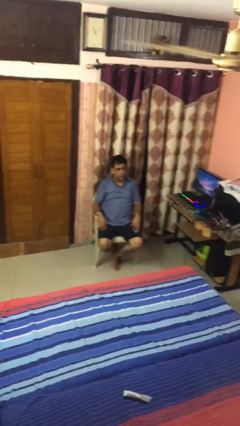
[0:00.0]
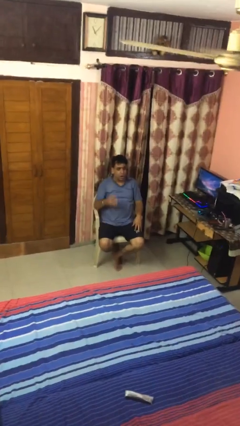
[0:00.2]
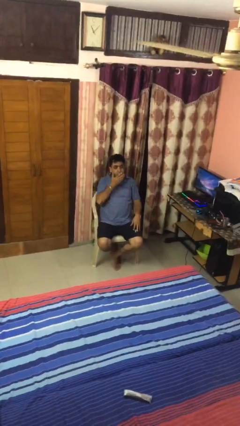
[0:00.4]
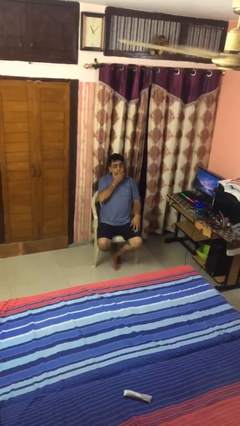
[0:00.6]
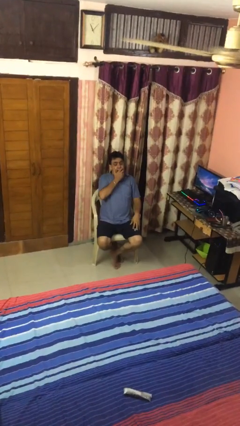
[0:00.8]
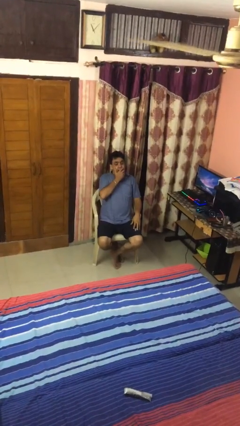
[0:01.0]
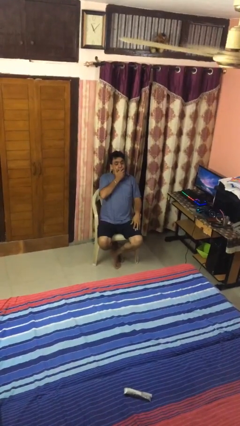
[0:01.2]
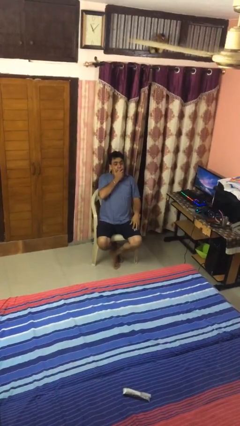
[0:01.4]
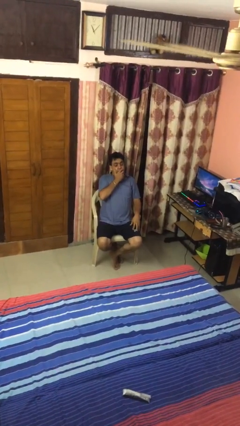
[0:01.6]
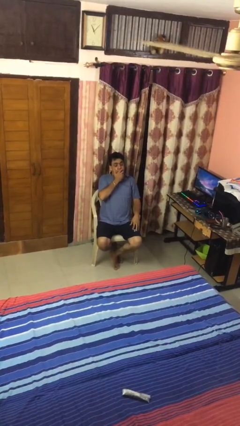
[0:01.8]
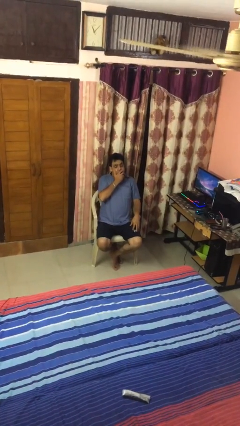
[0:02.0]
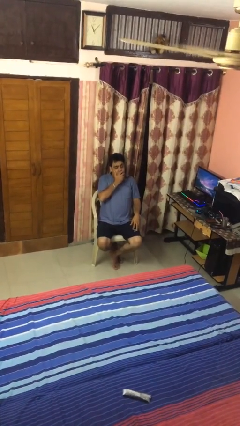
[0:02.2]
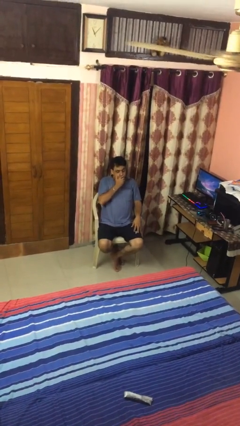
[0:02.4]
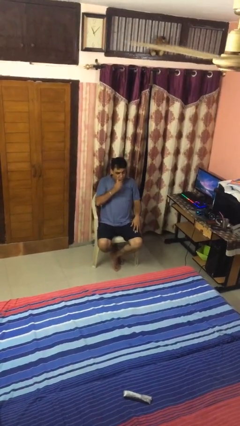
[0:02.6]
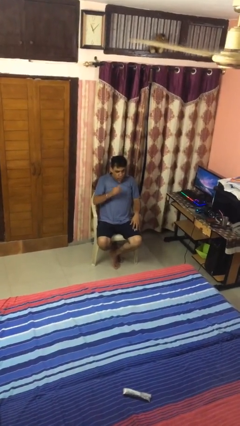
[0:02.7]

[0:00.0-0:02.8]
person covers face with hands

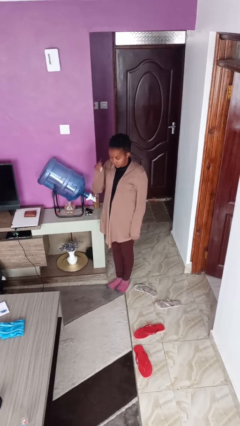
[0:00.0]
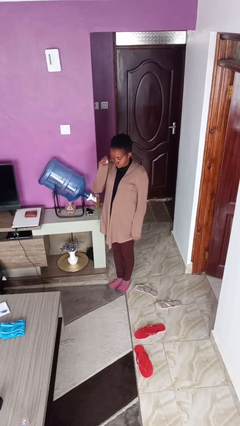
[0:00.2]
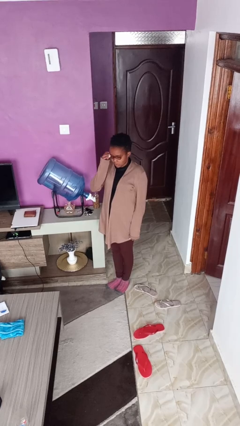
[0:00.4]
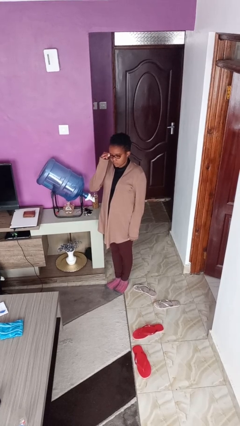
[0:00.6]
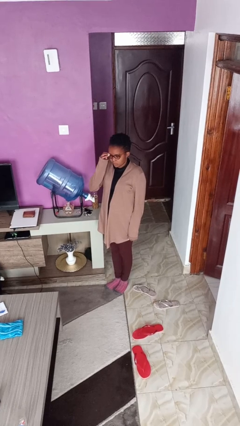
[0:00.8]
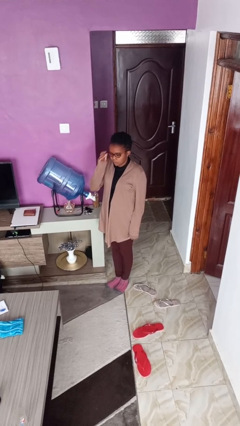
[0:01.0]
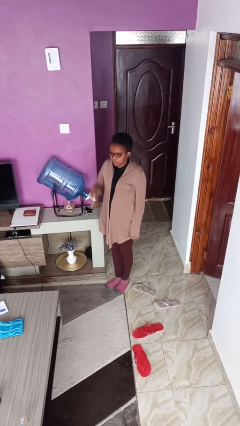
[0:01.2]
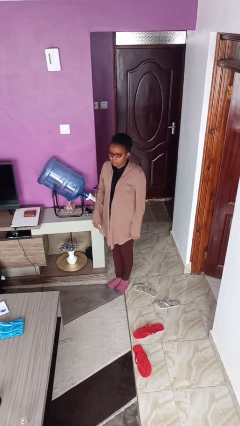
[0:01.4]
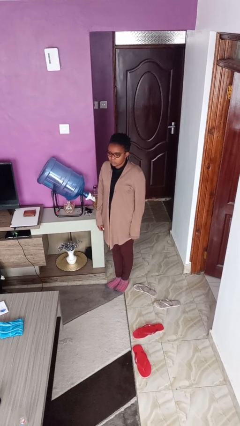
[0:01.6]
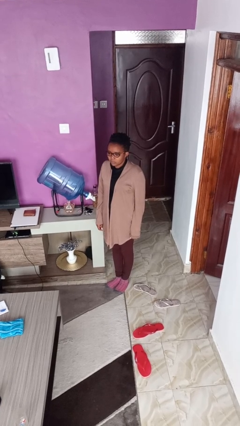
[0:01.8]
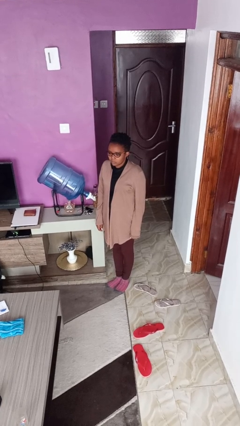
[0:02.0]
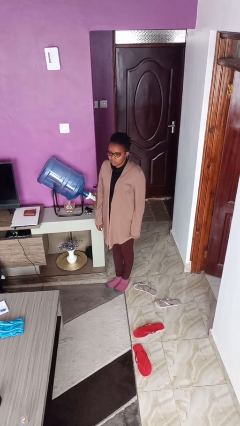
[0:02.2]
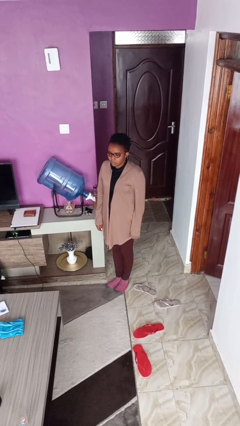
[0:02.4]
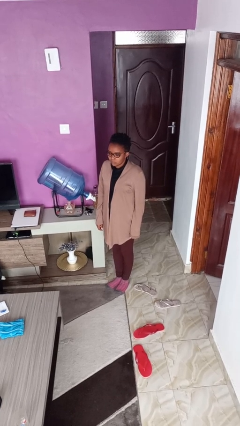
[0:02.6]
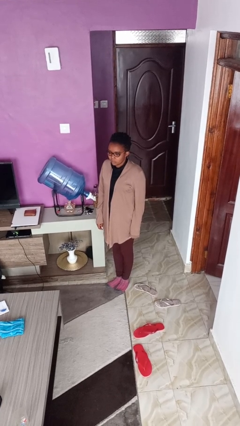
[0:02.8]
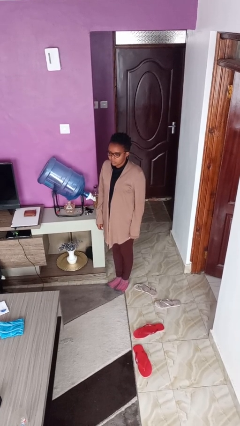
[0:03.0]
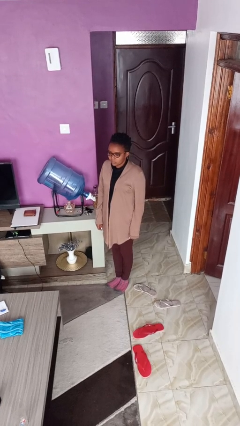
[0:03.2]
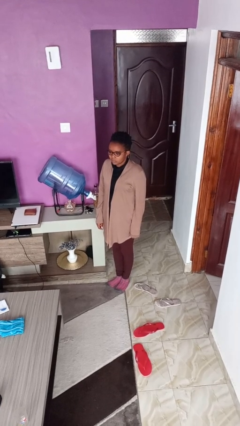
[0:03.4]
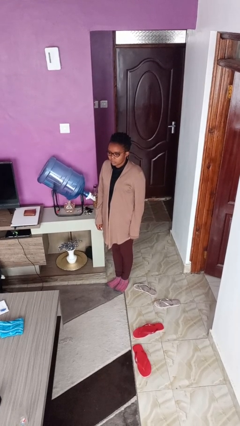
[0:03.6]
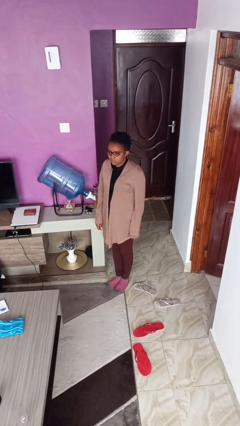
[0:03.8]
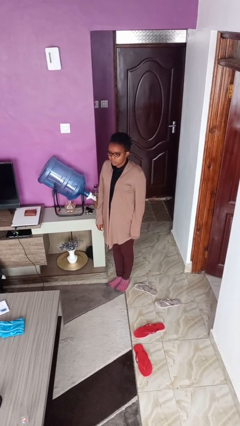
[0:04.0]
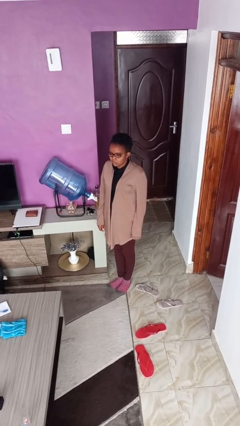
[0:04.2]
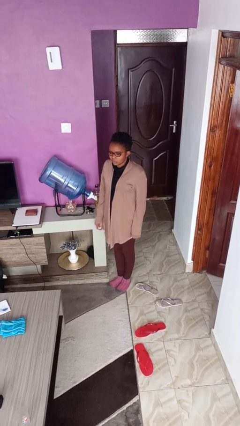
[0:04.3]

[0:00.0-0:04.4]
person puts on glasses

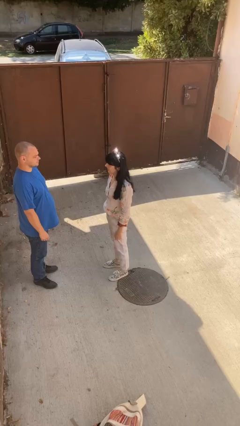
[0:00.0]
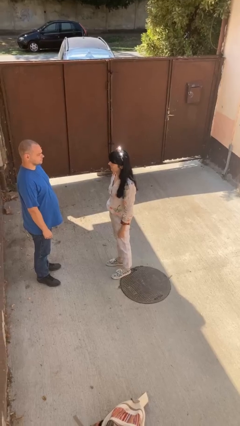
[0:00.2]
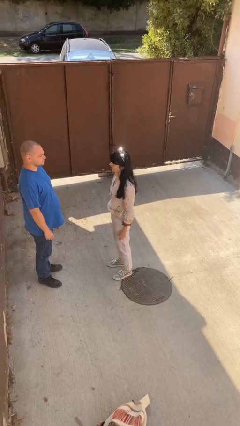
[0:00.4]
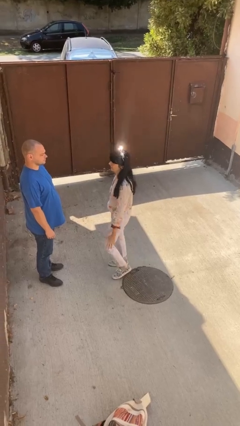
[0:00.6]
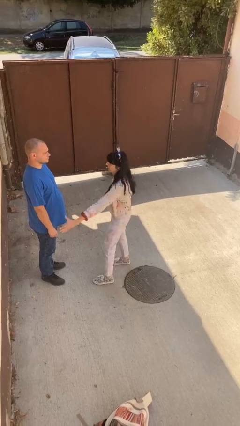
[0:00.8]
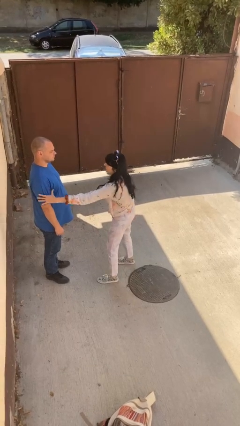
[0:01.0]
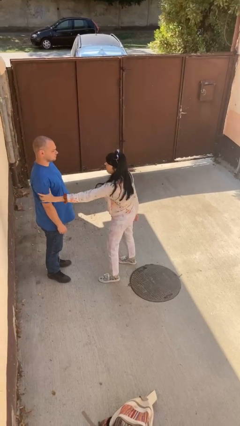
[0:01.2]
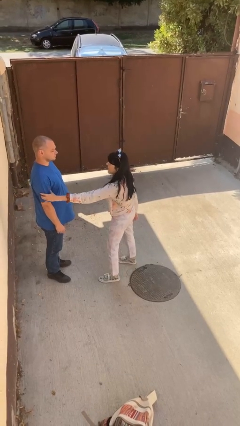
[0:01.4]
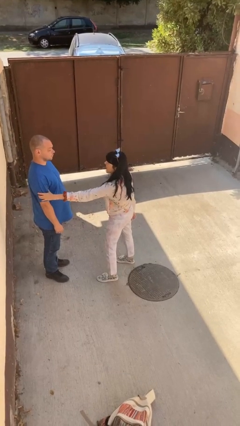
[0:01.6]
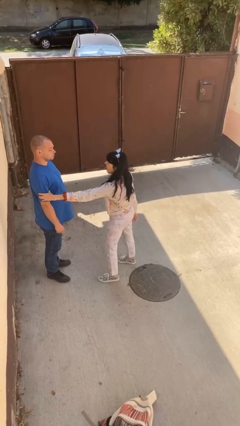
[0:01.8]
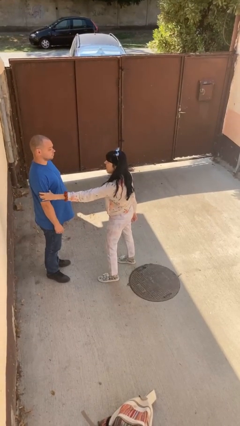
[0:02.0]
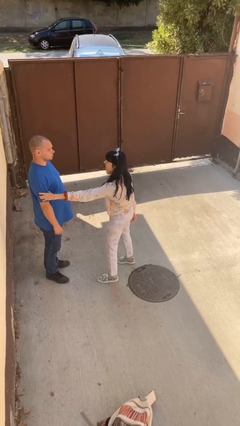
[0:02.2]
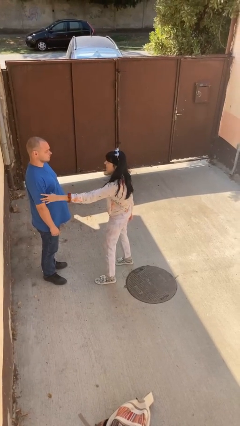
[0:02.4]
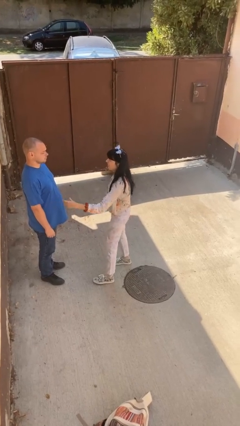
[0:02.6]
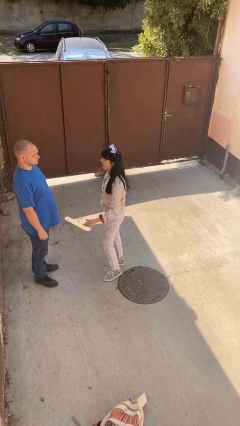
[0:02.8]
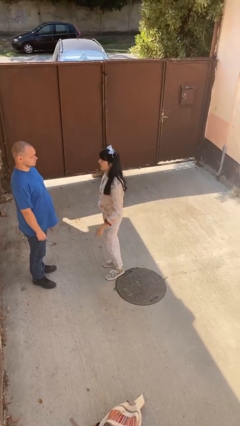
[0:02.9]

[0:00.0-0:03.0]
person grabs person by bicep

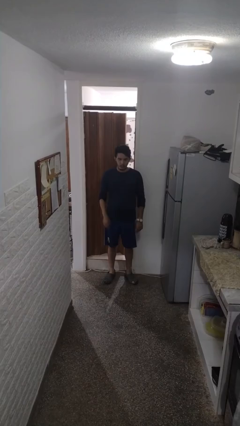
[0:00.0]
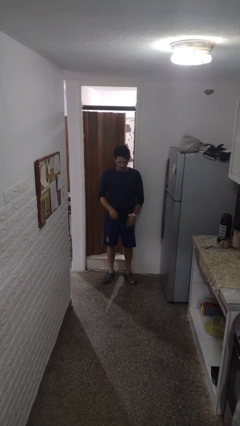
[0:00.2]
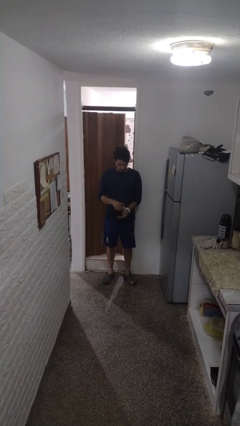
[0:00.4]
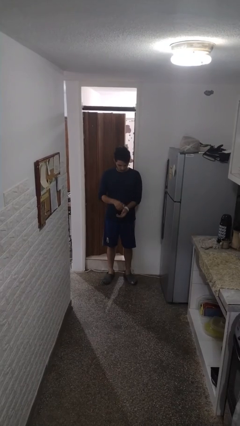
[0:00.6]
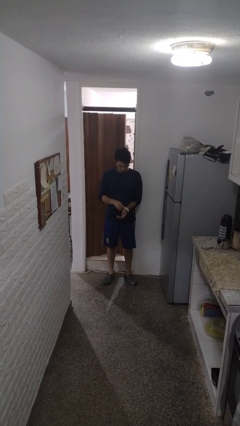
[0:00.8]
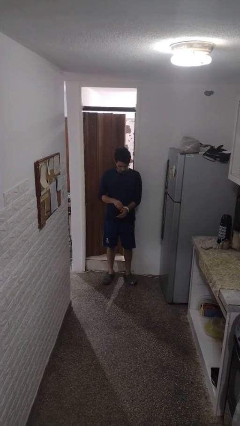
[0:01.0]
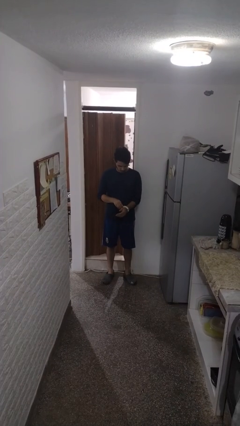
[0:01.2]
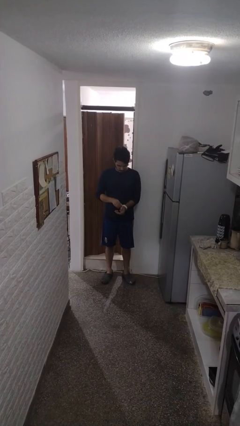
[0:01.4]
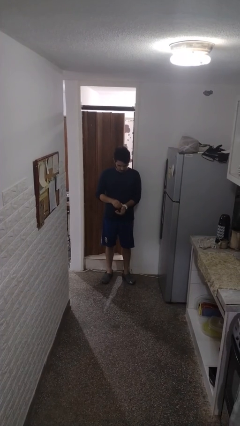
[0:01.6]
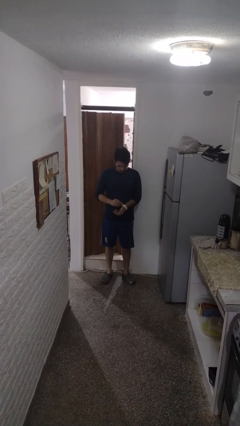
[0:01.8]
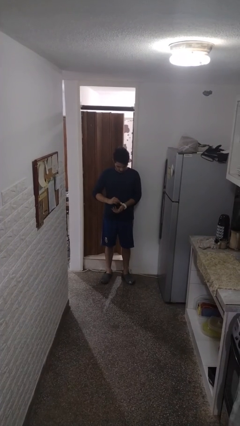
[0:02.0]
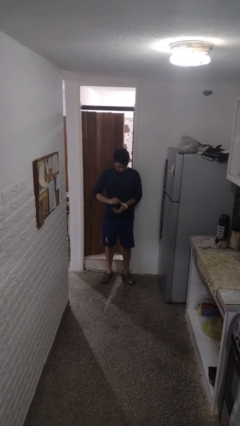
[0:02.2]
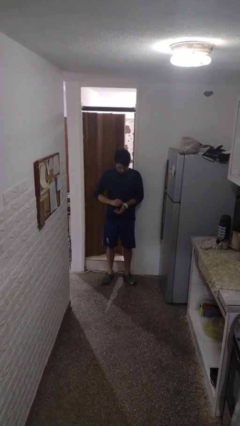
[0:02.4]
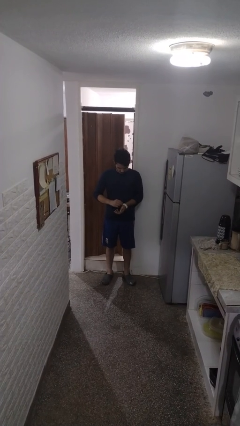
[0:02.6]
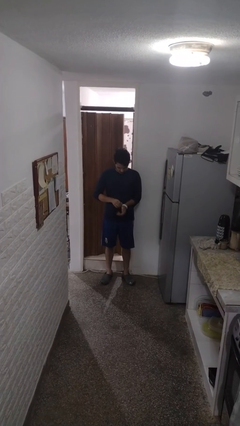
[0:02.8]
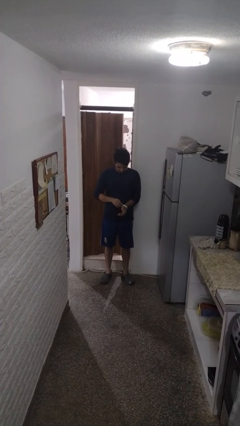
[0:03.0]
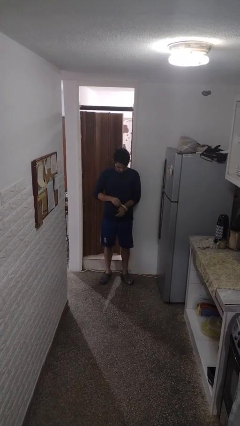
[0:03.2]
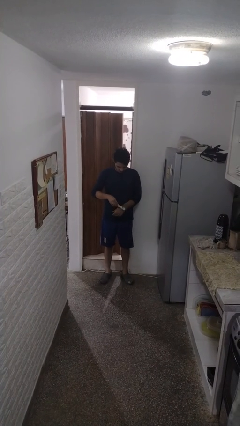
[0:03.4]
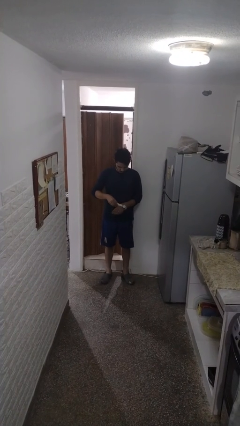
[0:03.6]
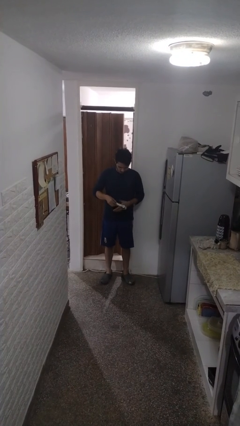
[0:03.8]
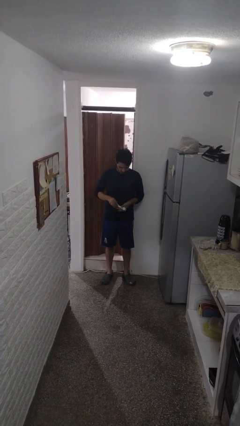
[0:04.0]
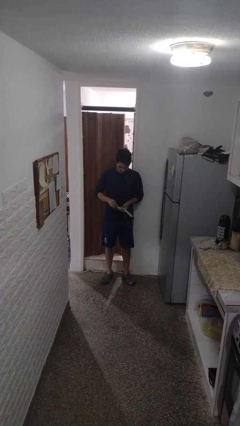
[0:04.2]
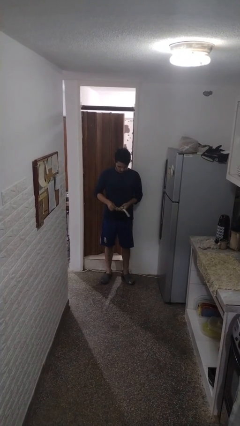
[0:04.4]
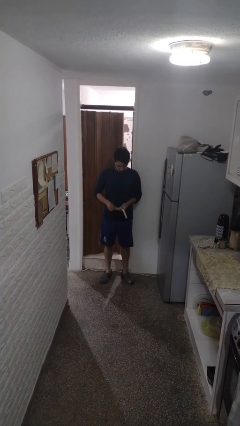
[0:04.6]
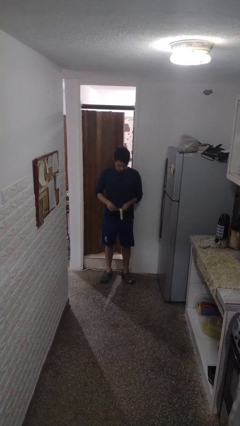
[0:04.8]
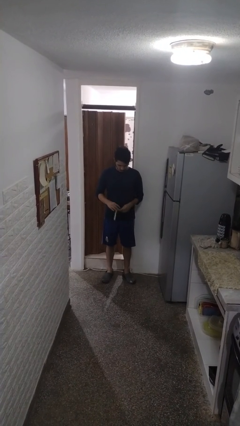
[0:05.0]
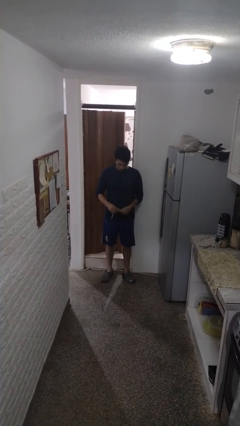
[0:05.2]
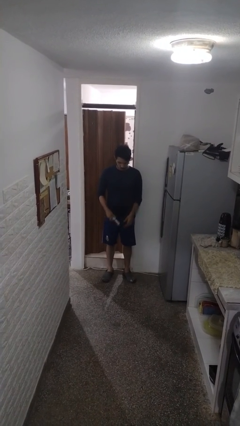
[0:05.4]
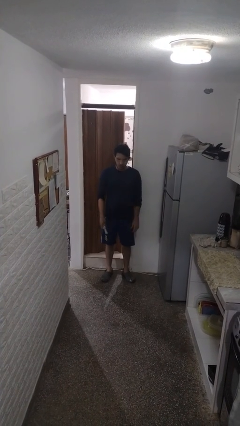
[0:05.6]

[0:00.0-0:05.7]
person takes off wristwatch

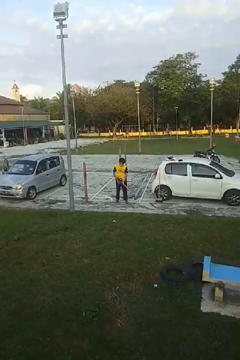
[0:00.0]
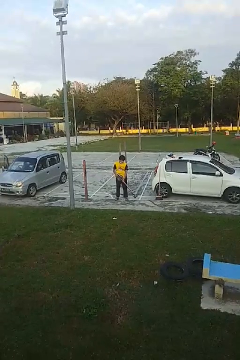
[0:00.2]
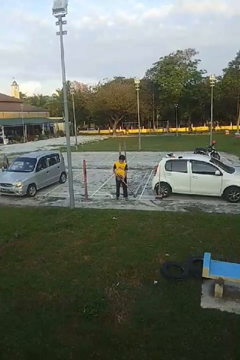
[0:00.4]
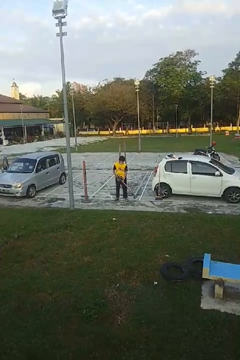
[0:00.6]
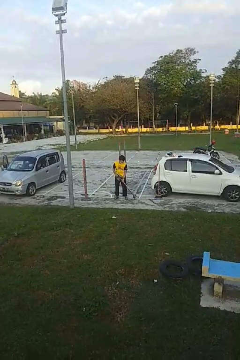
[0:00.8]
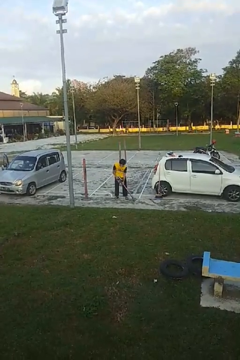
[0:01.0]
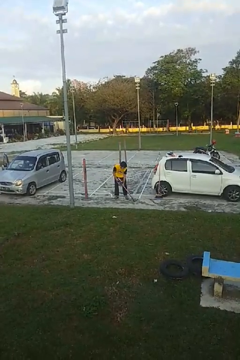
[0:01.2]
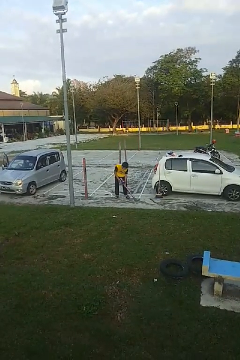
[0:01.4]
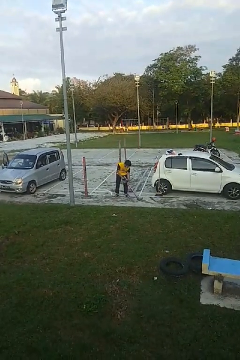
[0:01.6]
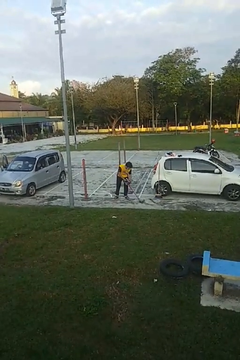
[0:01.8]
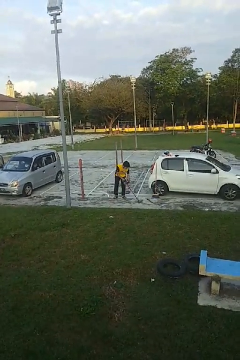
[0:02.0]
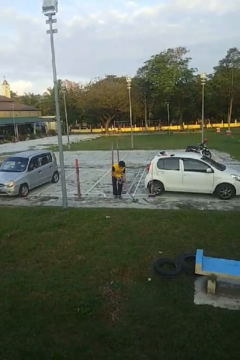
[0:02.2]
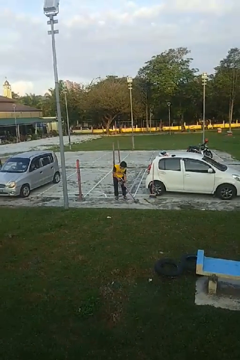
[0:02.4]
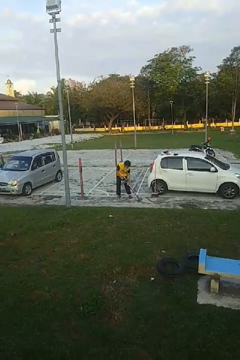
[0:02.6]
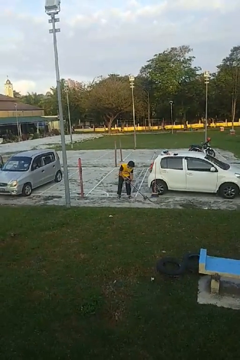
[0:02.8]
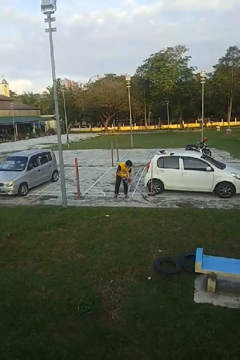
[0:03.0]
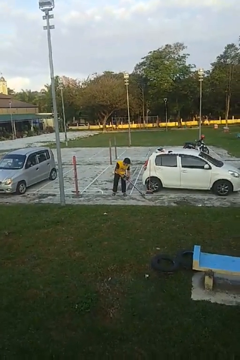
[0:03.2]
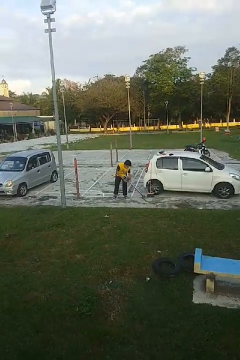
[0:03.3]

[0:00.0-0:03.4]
person vacuums carpet
